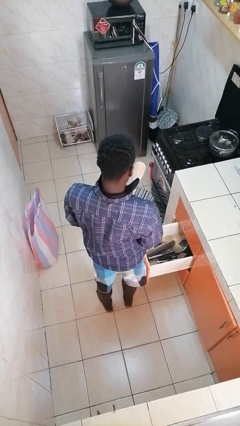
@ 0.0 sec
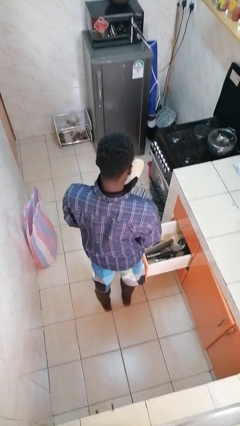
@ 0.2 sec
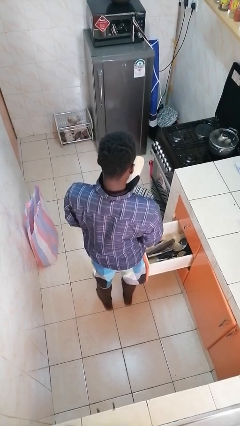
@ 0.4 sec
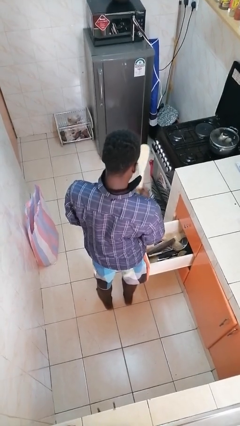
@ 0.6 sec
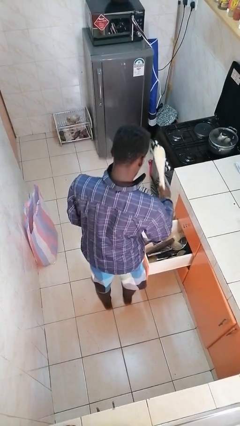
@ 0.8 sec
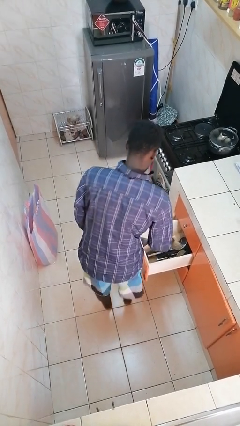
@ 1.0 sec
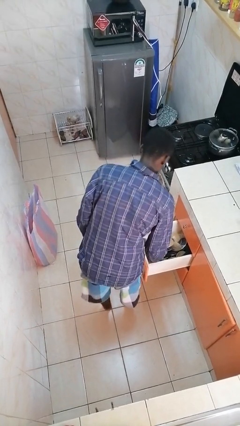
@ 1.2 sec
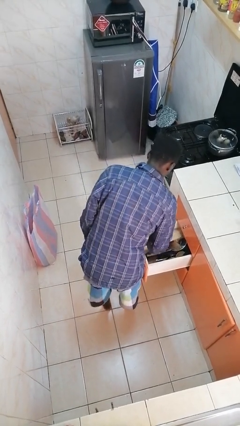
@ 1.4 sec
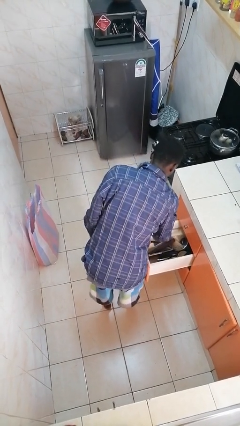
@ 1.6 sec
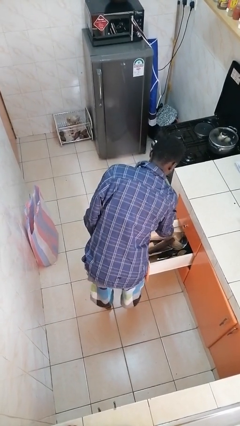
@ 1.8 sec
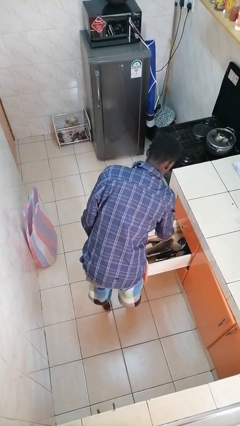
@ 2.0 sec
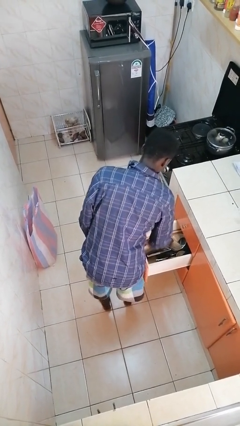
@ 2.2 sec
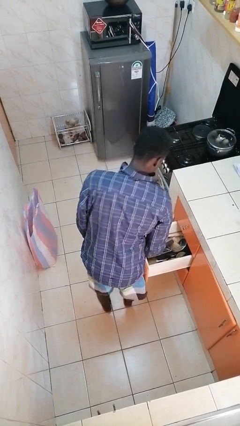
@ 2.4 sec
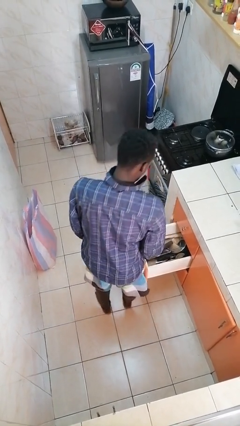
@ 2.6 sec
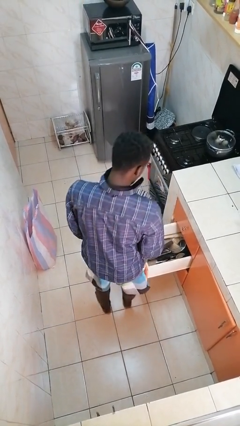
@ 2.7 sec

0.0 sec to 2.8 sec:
person puts object into kitchen drawer

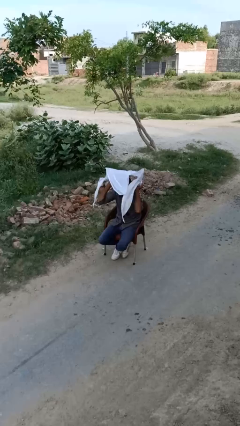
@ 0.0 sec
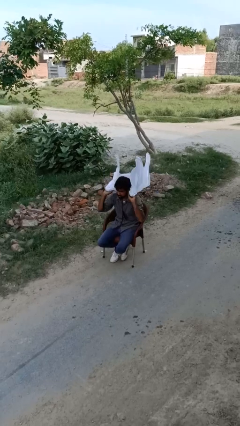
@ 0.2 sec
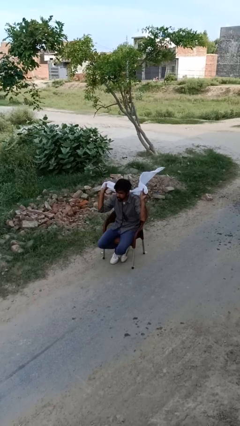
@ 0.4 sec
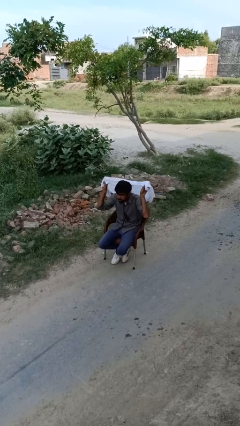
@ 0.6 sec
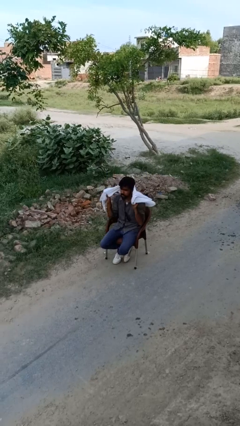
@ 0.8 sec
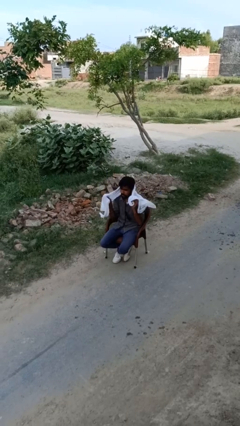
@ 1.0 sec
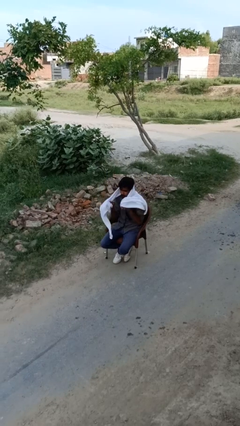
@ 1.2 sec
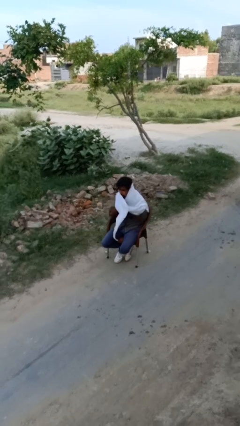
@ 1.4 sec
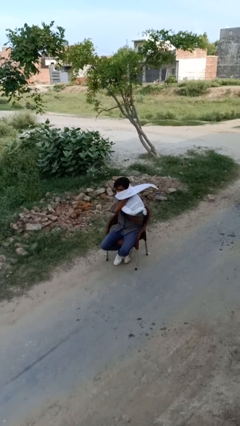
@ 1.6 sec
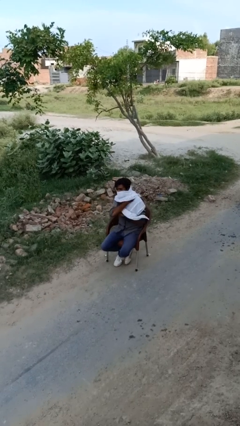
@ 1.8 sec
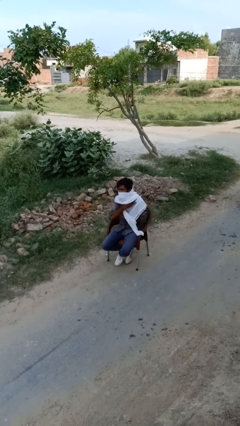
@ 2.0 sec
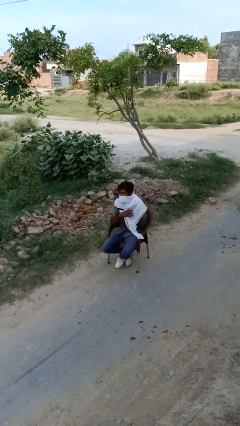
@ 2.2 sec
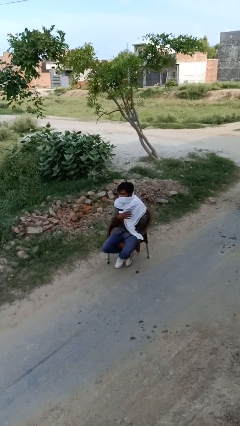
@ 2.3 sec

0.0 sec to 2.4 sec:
person puts on scarf

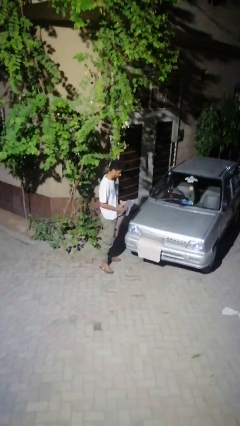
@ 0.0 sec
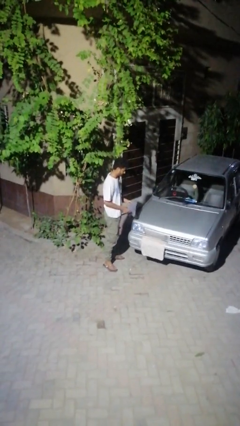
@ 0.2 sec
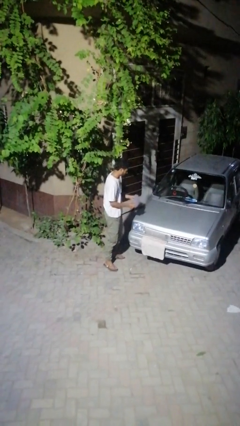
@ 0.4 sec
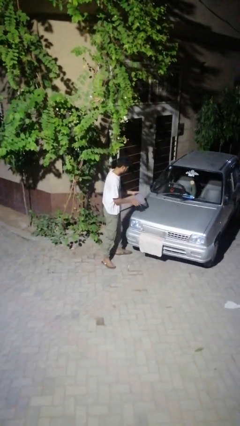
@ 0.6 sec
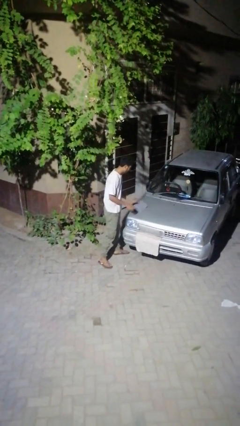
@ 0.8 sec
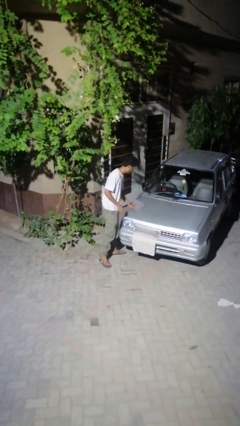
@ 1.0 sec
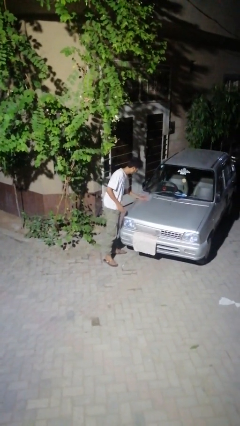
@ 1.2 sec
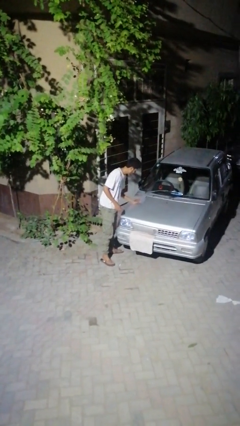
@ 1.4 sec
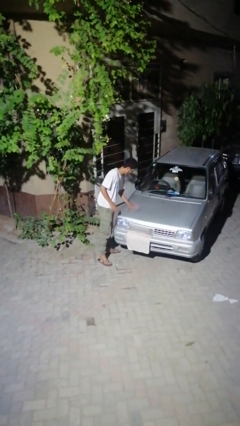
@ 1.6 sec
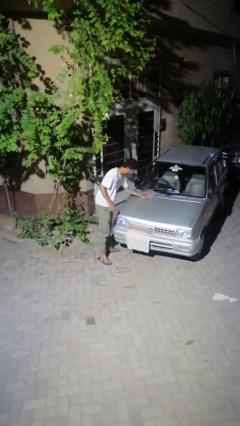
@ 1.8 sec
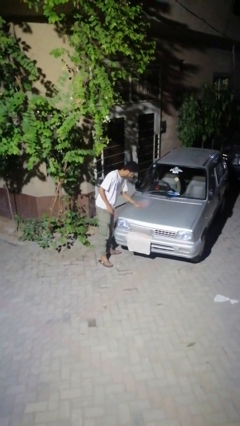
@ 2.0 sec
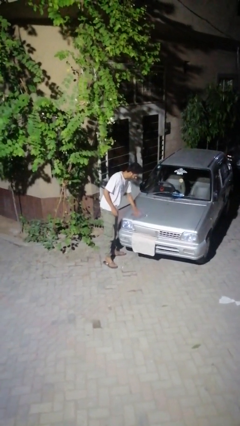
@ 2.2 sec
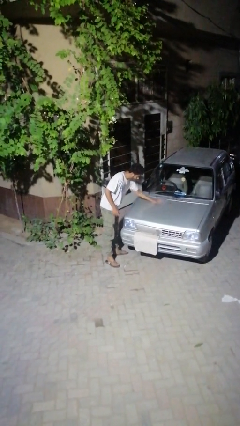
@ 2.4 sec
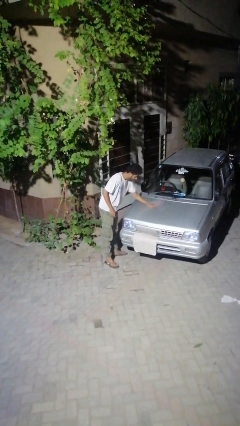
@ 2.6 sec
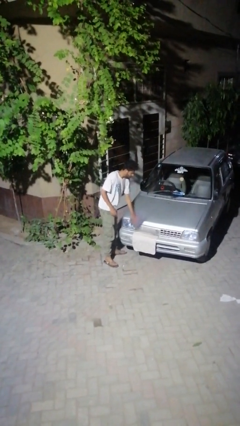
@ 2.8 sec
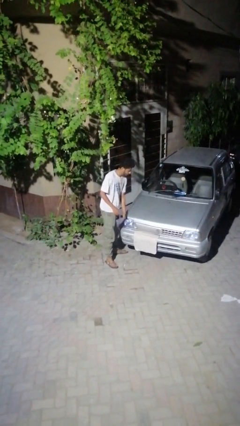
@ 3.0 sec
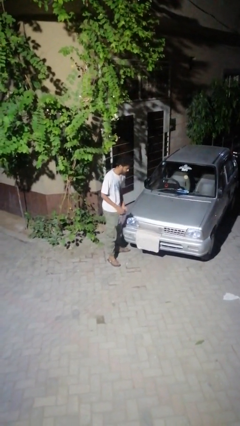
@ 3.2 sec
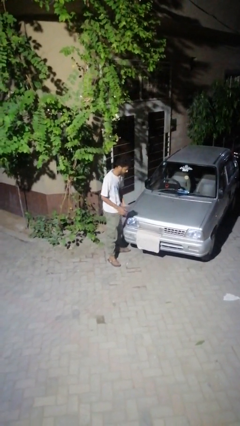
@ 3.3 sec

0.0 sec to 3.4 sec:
person polishes car with rag

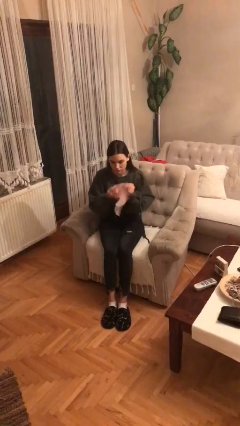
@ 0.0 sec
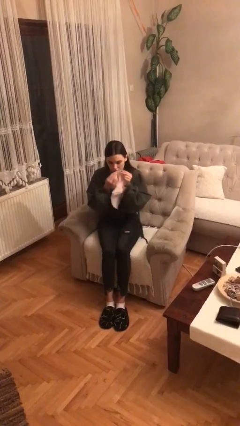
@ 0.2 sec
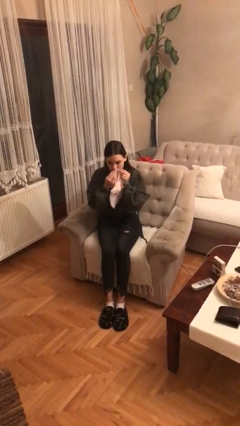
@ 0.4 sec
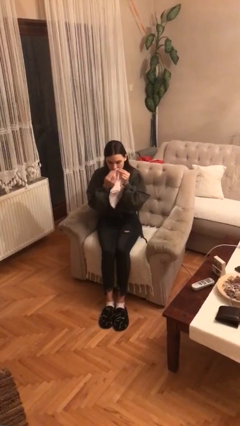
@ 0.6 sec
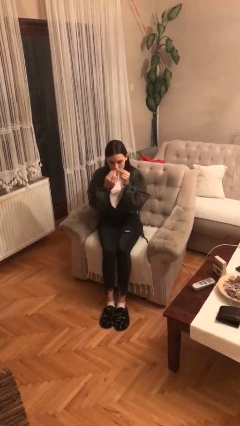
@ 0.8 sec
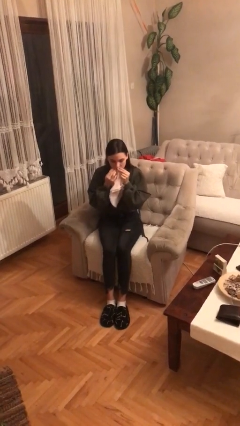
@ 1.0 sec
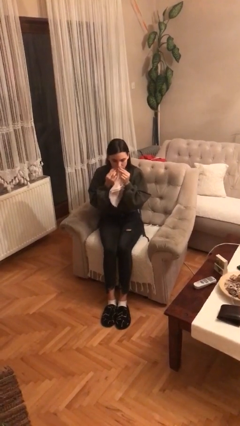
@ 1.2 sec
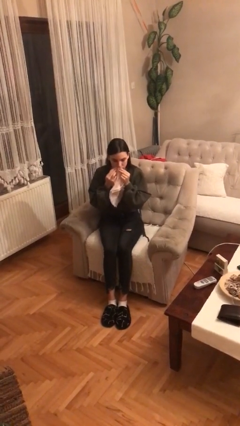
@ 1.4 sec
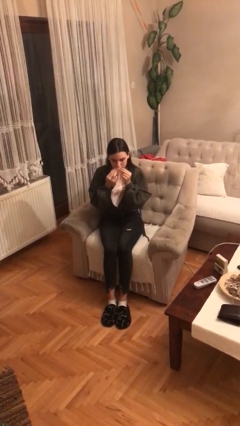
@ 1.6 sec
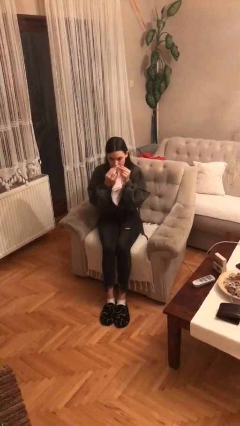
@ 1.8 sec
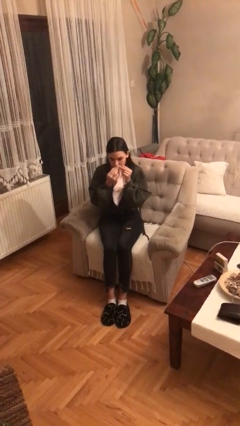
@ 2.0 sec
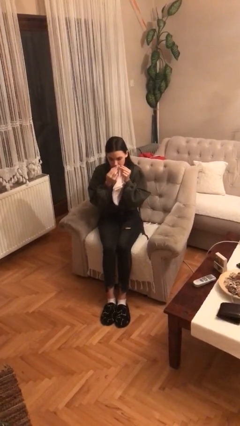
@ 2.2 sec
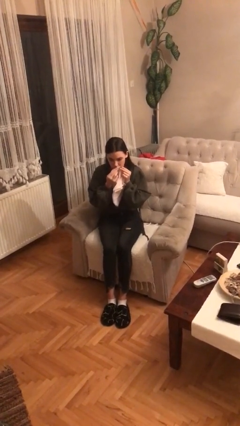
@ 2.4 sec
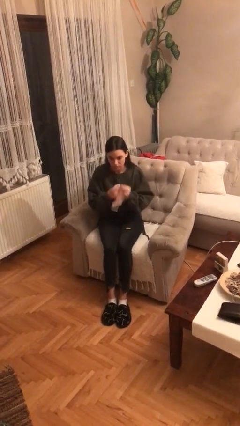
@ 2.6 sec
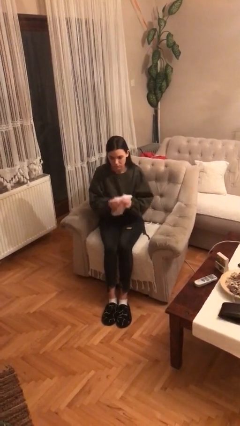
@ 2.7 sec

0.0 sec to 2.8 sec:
person wipes mouth with napkin

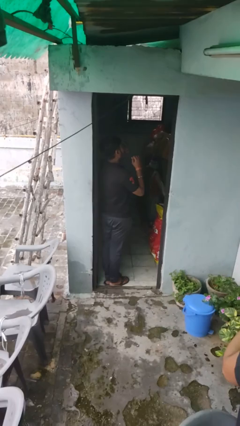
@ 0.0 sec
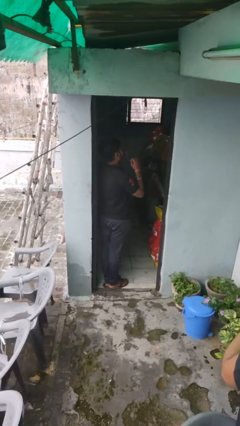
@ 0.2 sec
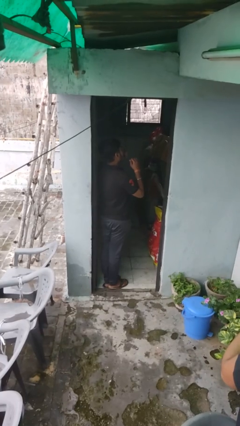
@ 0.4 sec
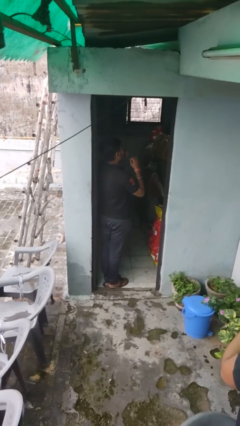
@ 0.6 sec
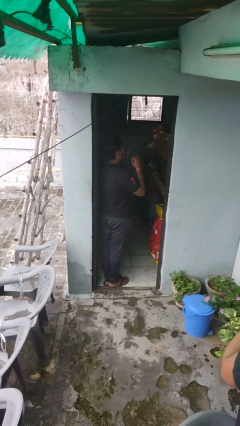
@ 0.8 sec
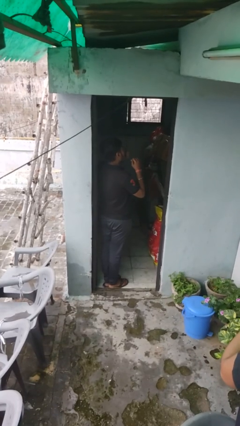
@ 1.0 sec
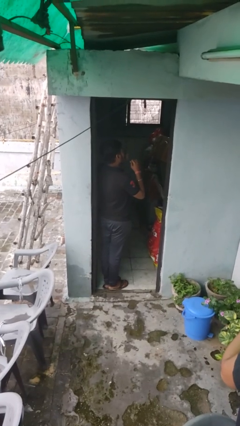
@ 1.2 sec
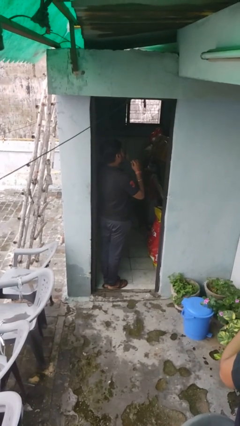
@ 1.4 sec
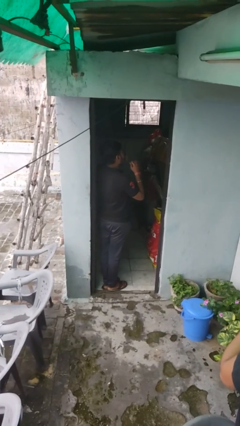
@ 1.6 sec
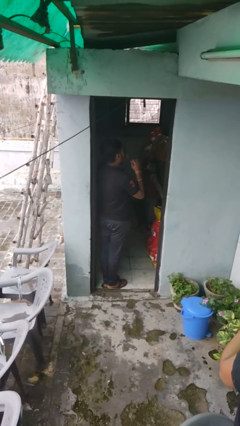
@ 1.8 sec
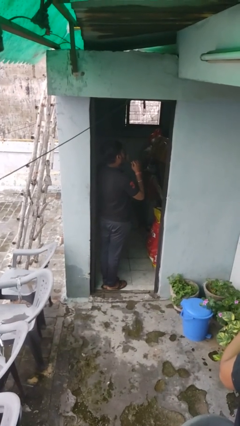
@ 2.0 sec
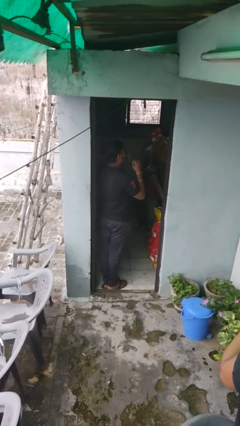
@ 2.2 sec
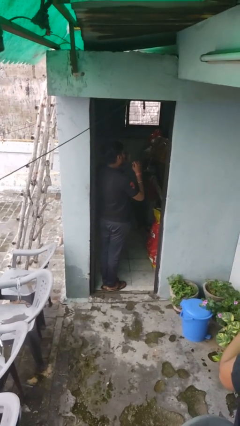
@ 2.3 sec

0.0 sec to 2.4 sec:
person flosses

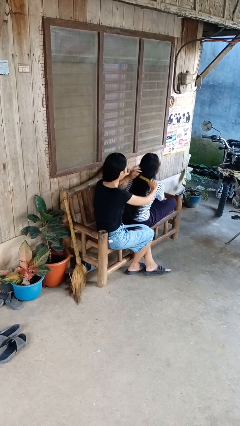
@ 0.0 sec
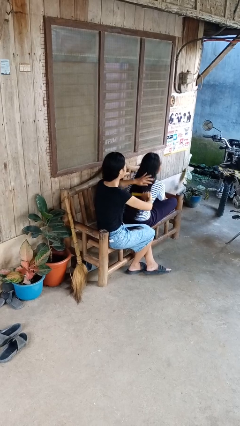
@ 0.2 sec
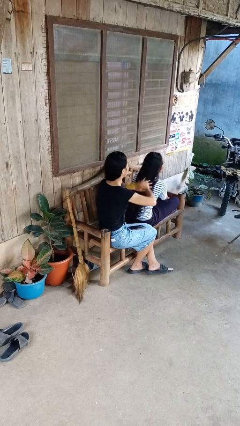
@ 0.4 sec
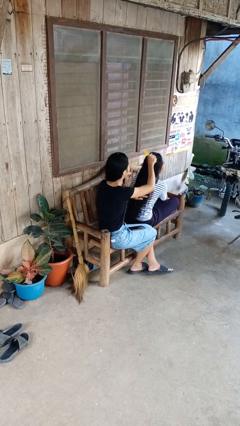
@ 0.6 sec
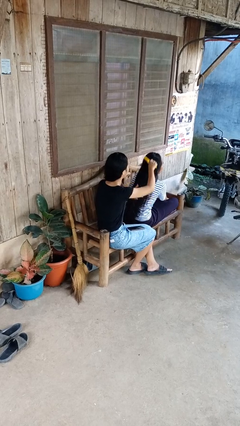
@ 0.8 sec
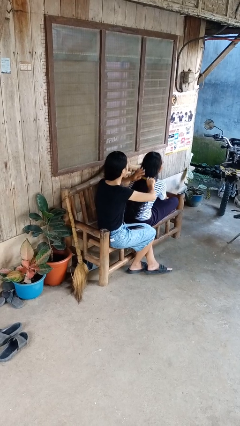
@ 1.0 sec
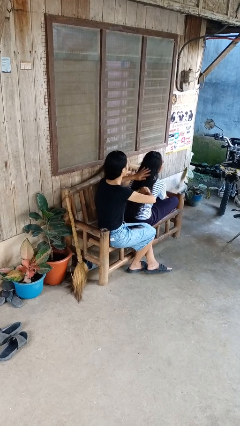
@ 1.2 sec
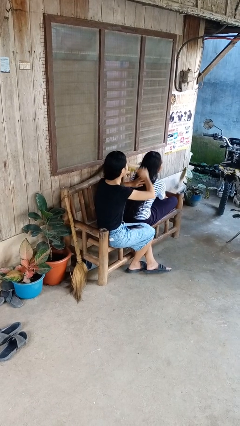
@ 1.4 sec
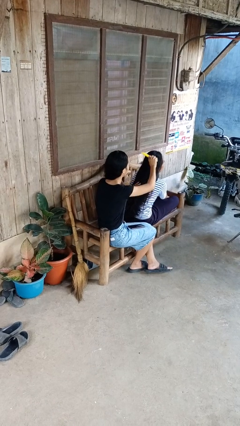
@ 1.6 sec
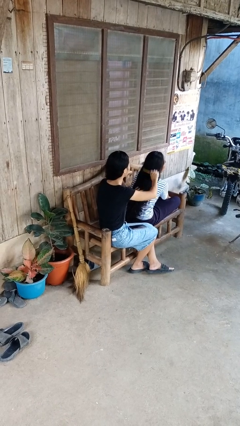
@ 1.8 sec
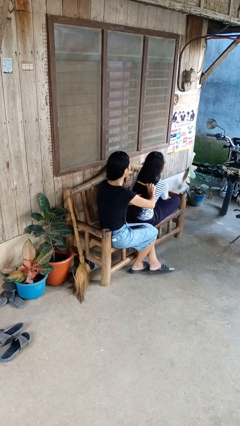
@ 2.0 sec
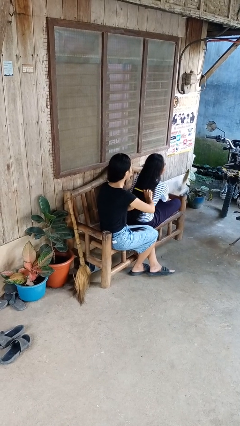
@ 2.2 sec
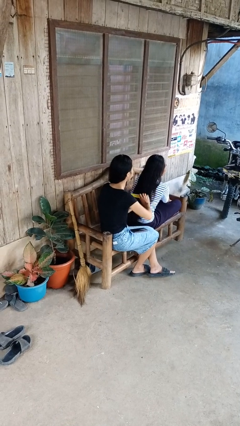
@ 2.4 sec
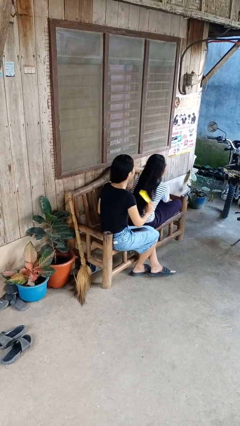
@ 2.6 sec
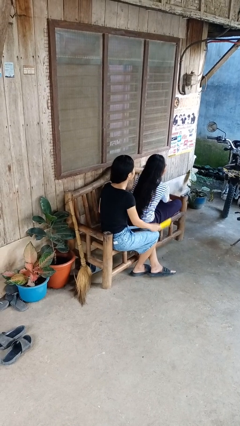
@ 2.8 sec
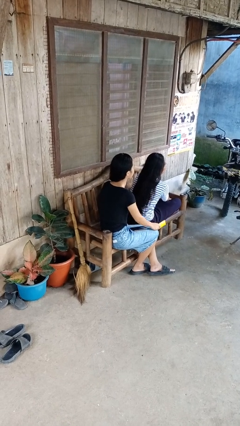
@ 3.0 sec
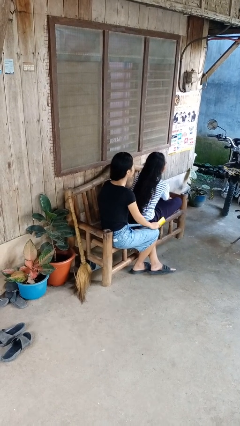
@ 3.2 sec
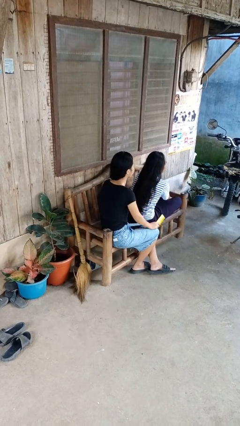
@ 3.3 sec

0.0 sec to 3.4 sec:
person brushes hair of person
